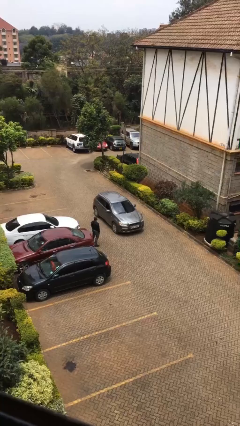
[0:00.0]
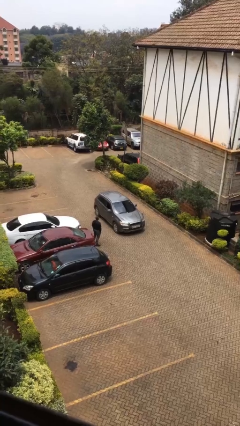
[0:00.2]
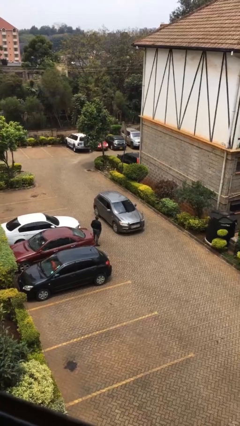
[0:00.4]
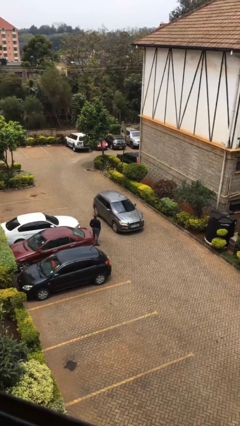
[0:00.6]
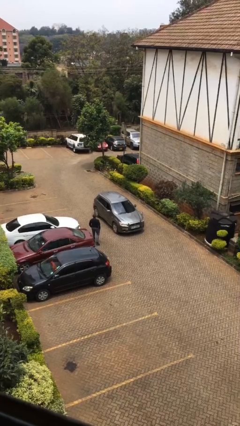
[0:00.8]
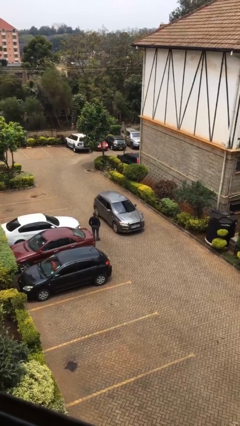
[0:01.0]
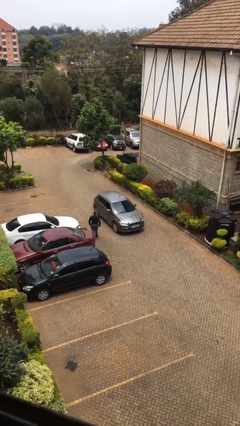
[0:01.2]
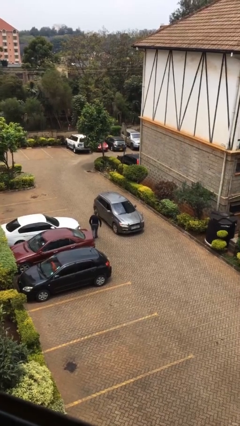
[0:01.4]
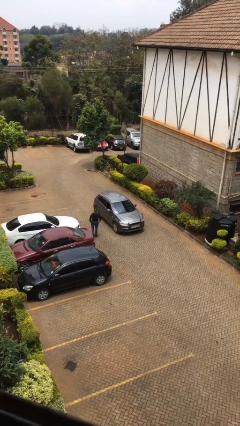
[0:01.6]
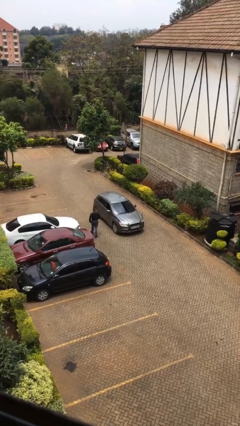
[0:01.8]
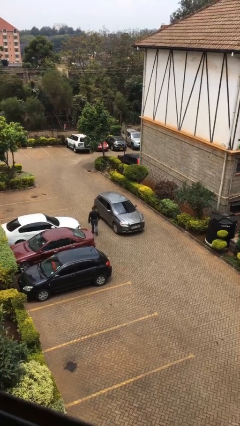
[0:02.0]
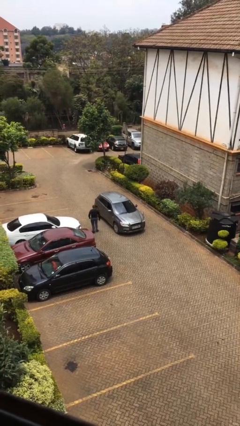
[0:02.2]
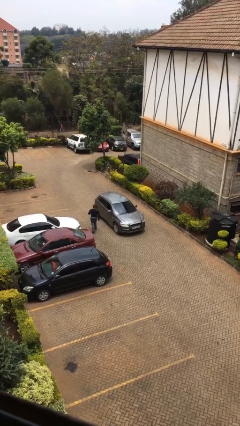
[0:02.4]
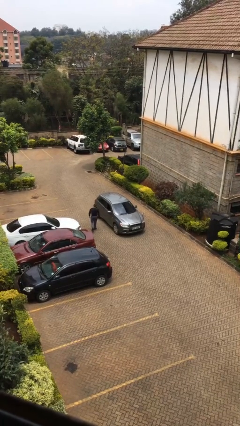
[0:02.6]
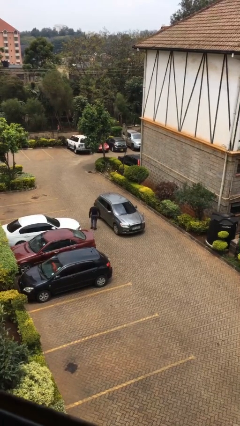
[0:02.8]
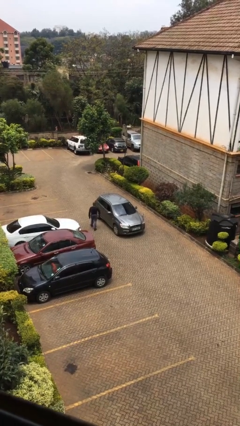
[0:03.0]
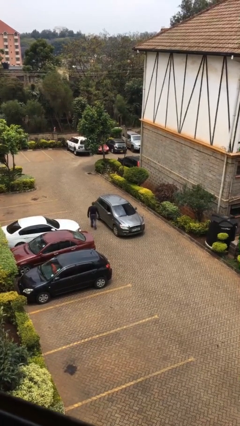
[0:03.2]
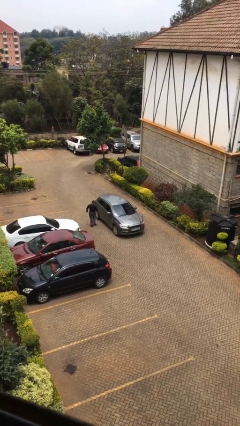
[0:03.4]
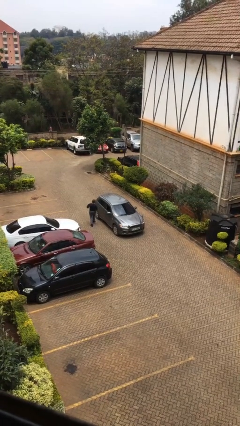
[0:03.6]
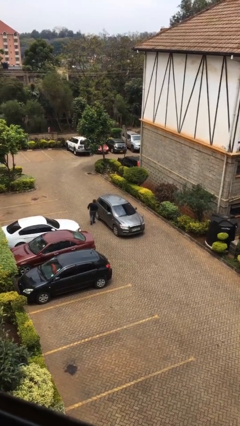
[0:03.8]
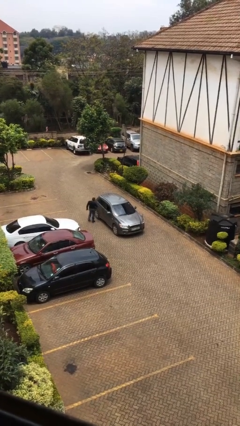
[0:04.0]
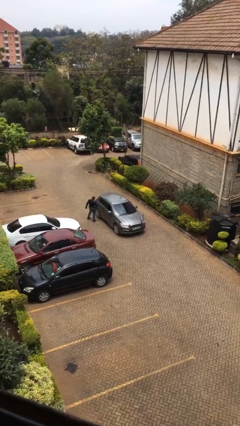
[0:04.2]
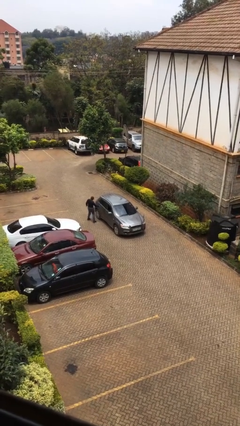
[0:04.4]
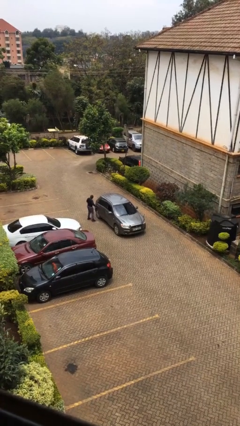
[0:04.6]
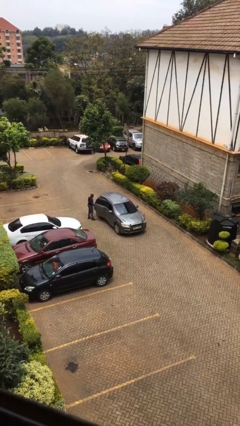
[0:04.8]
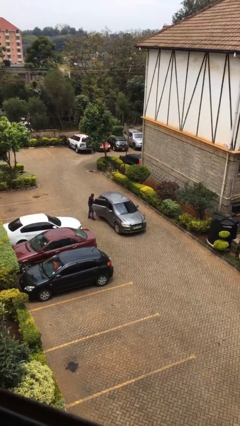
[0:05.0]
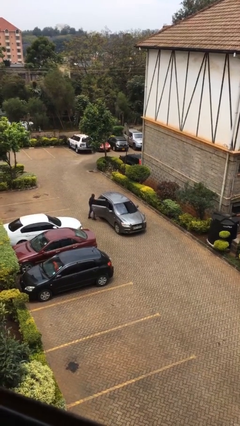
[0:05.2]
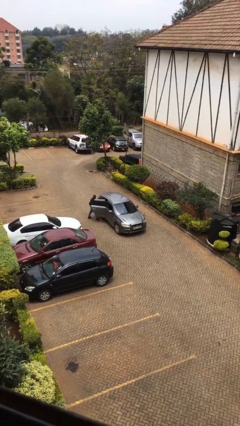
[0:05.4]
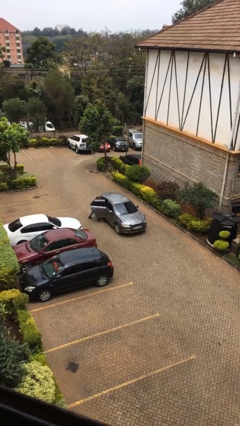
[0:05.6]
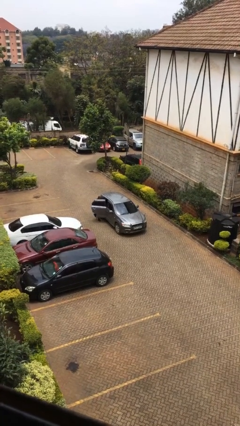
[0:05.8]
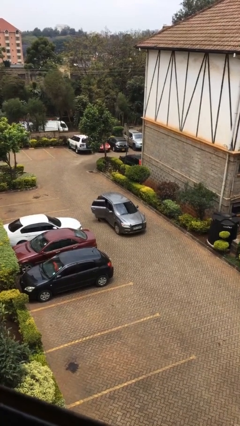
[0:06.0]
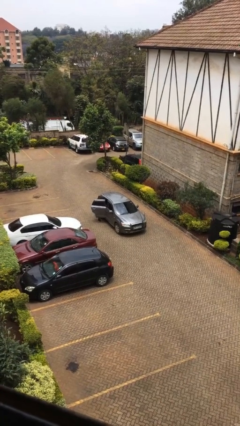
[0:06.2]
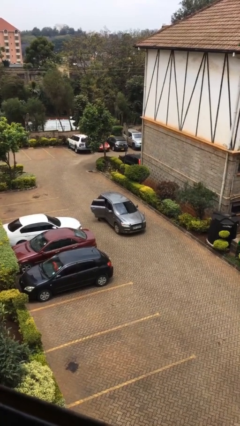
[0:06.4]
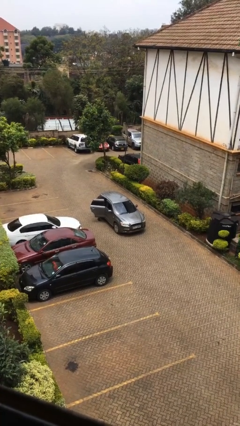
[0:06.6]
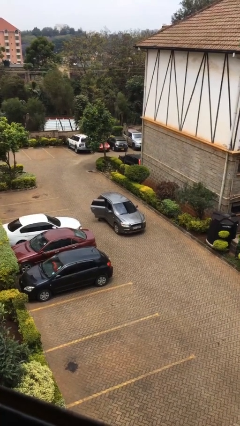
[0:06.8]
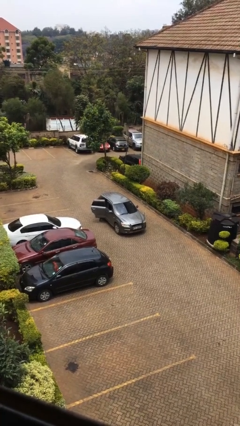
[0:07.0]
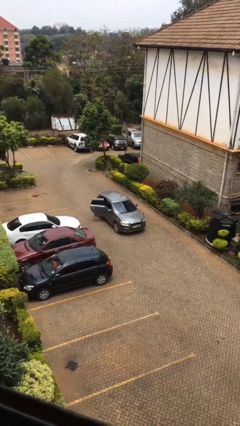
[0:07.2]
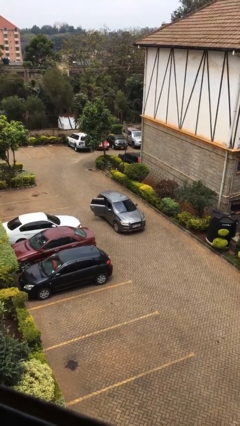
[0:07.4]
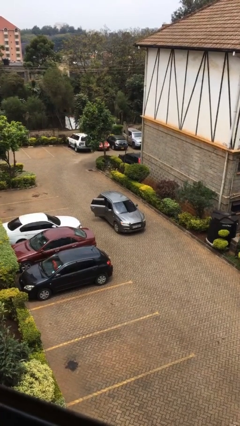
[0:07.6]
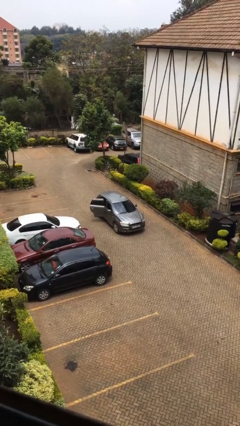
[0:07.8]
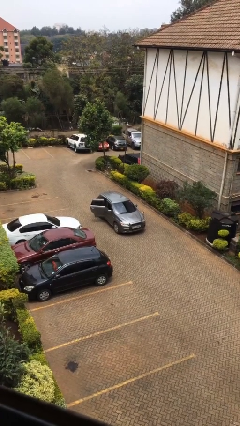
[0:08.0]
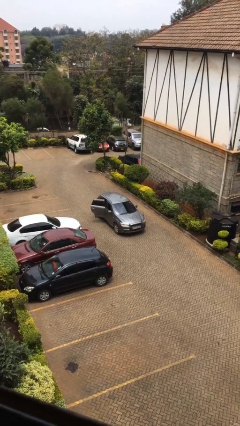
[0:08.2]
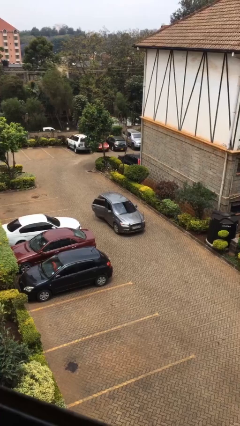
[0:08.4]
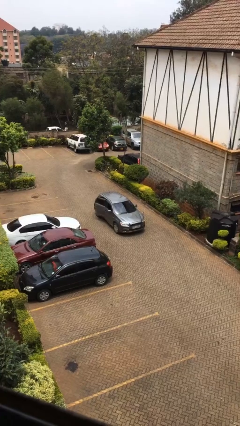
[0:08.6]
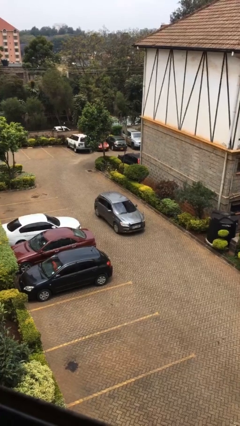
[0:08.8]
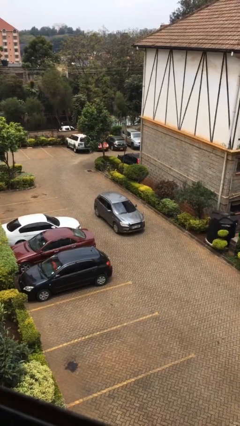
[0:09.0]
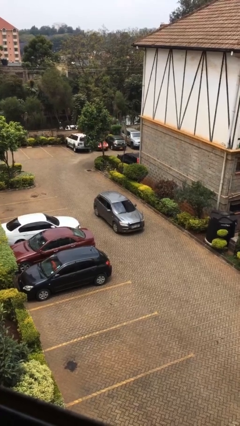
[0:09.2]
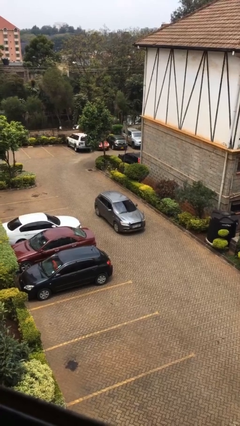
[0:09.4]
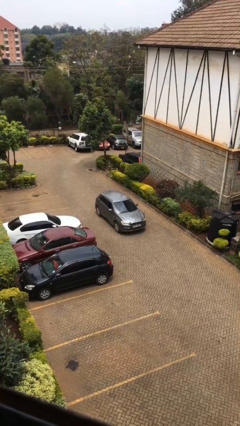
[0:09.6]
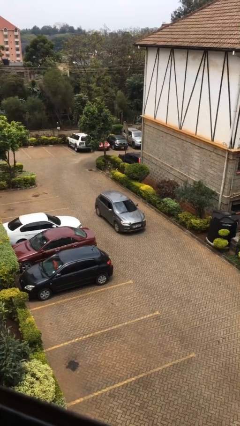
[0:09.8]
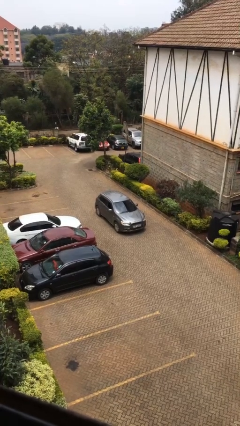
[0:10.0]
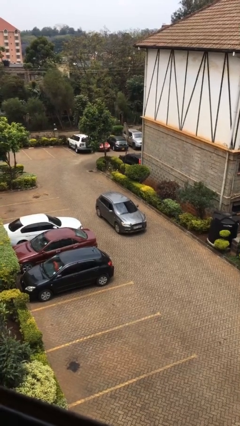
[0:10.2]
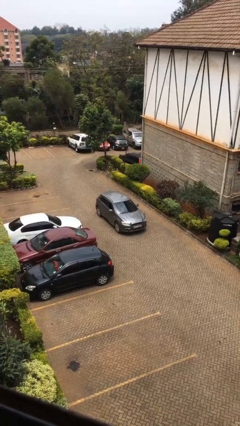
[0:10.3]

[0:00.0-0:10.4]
car picks up person

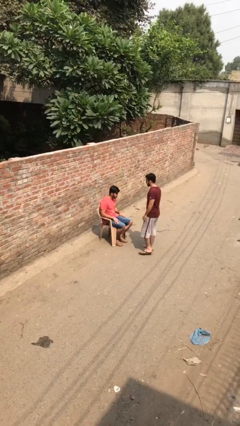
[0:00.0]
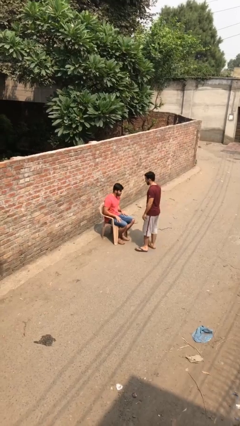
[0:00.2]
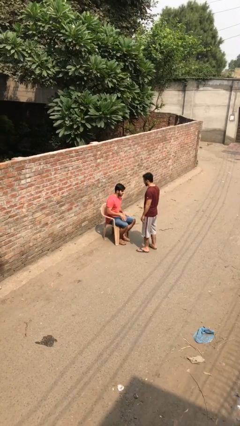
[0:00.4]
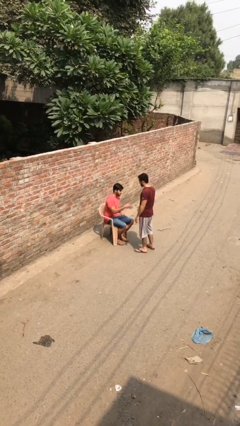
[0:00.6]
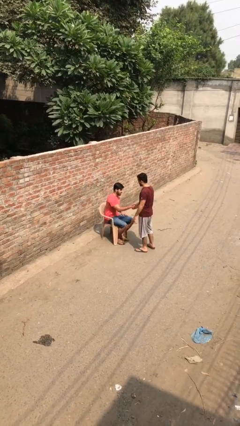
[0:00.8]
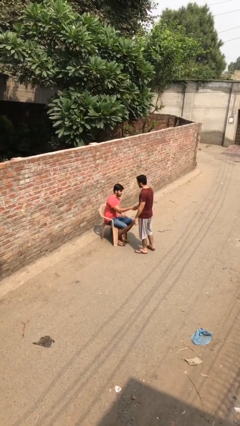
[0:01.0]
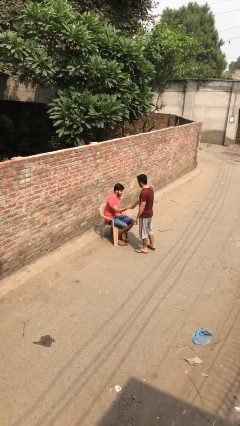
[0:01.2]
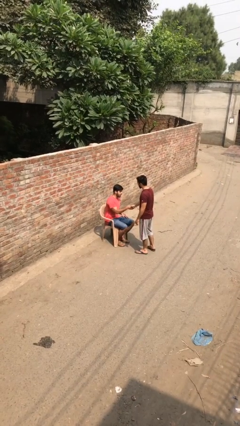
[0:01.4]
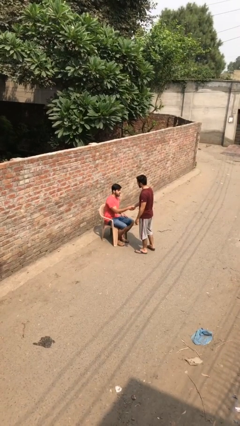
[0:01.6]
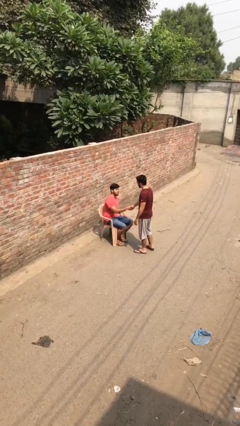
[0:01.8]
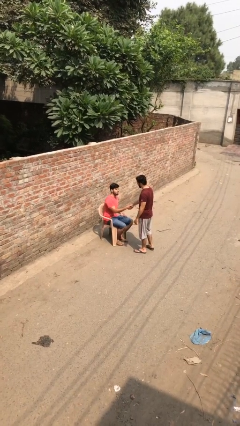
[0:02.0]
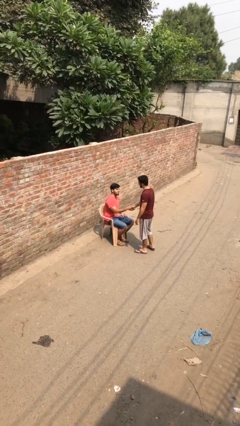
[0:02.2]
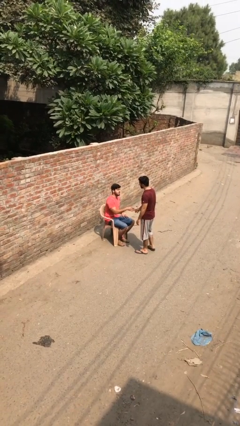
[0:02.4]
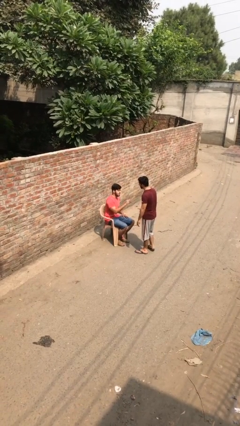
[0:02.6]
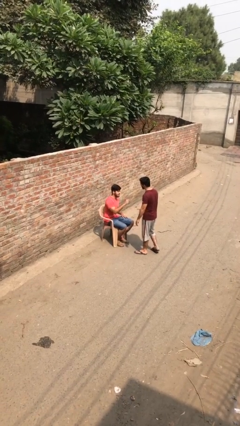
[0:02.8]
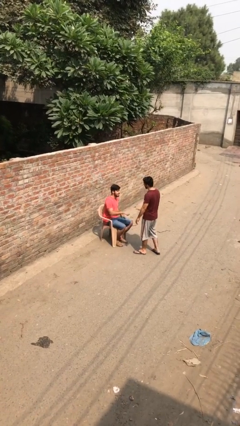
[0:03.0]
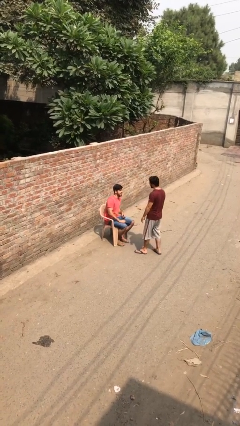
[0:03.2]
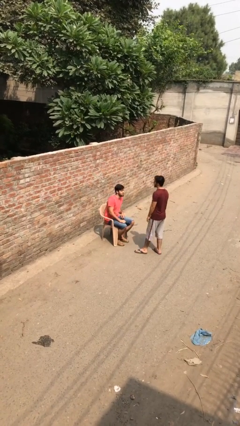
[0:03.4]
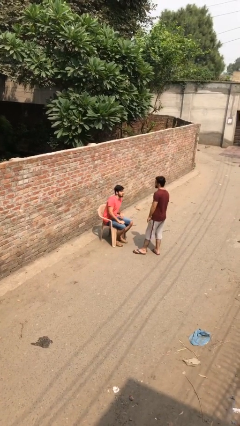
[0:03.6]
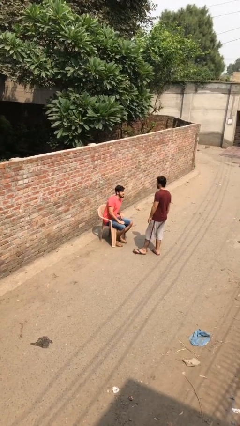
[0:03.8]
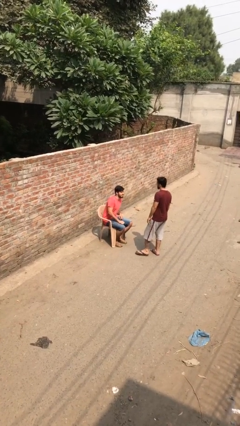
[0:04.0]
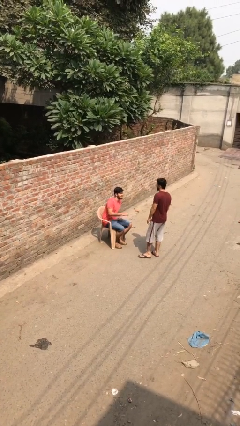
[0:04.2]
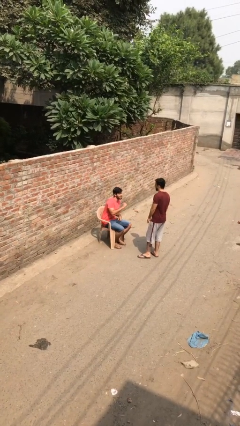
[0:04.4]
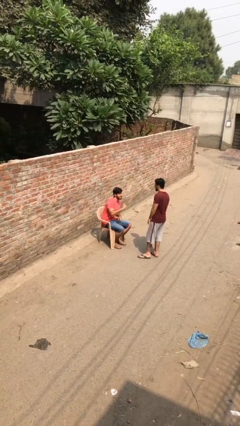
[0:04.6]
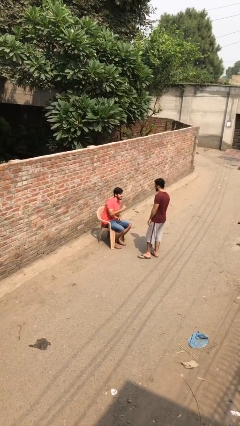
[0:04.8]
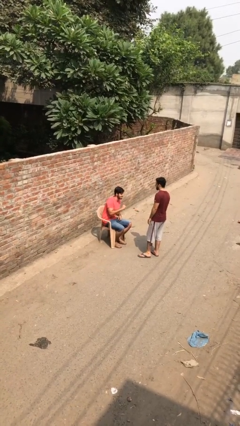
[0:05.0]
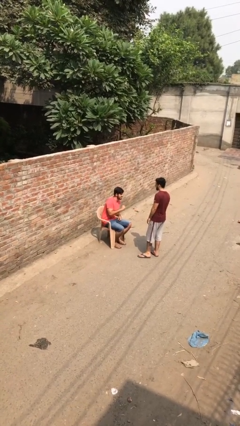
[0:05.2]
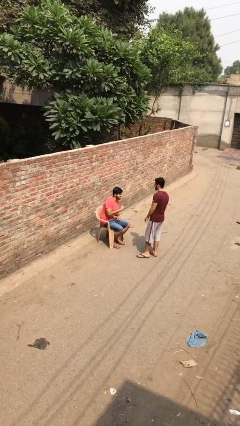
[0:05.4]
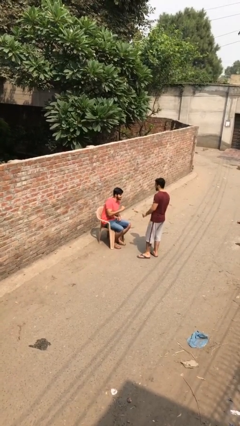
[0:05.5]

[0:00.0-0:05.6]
person shakes hand

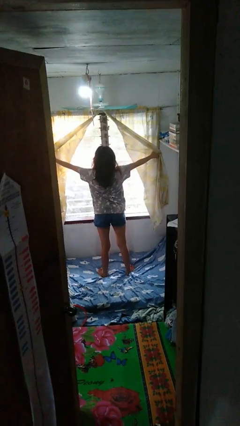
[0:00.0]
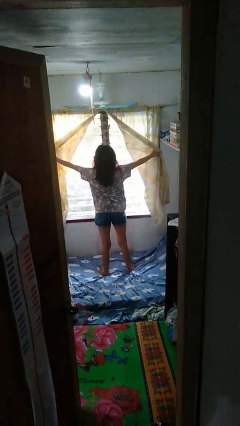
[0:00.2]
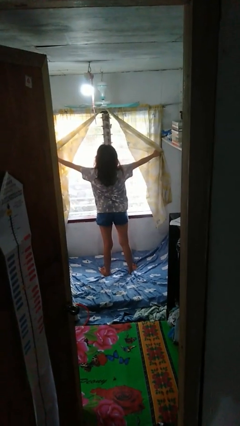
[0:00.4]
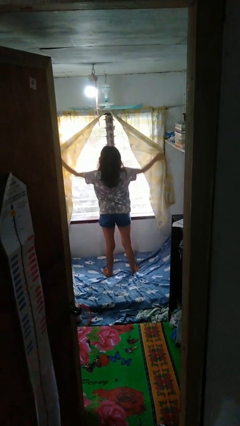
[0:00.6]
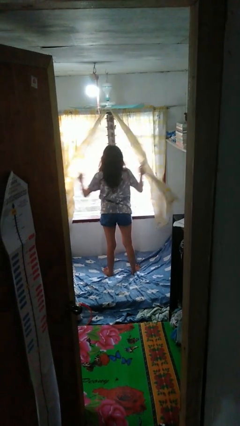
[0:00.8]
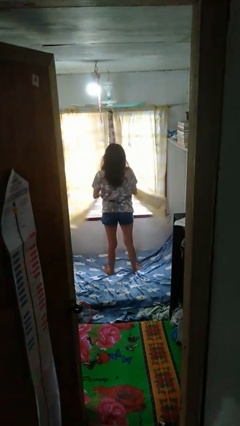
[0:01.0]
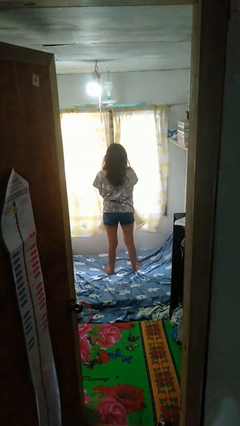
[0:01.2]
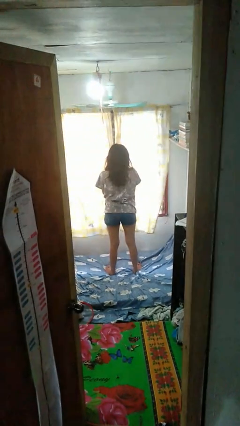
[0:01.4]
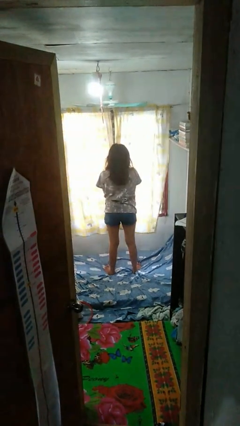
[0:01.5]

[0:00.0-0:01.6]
person closes curtains

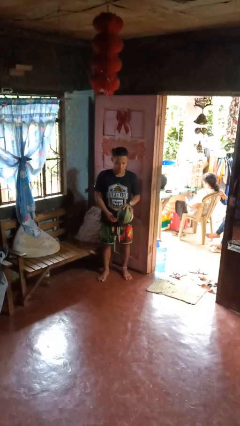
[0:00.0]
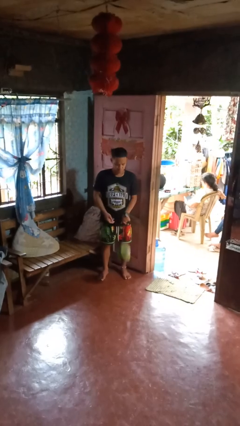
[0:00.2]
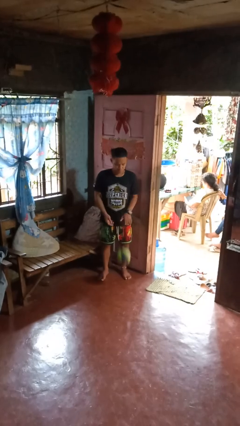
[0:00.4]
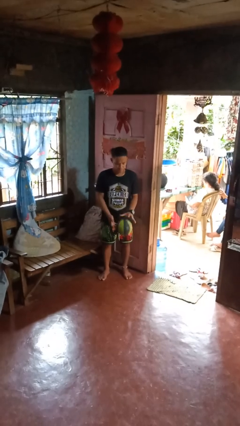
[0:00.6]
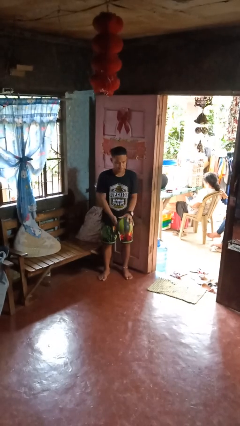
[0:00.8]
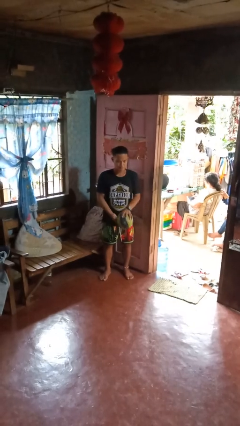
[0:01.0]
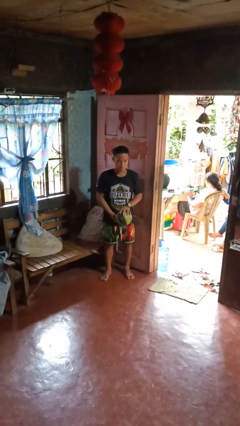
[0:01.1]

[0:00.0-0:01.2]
person bounces ball on floor
